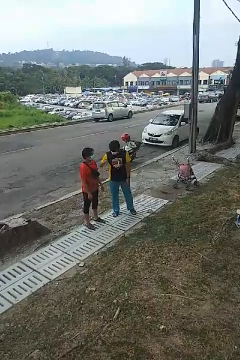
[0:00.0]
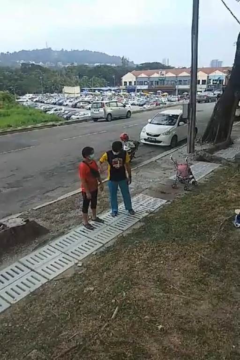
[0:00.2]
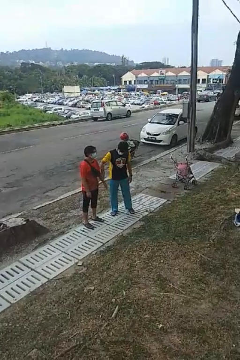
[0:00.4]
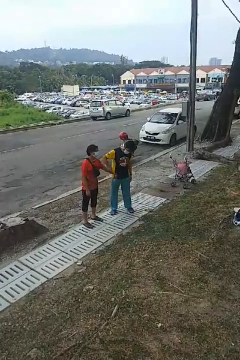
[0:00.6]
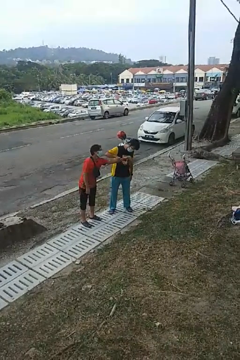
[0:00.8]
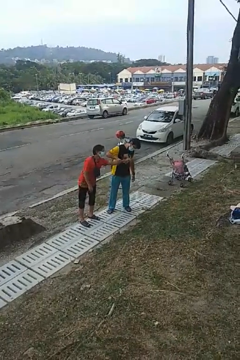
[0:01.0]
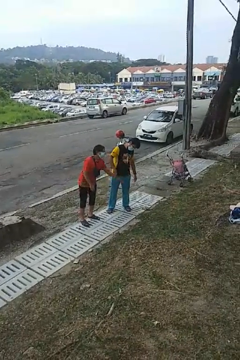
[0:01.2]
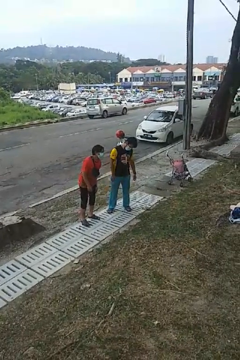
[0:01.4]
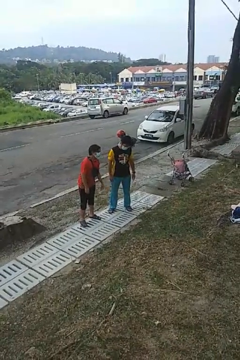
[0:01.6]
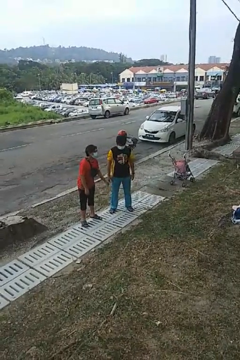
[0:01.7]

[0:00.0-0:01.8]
person grabs person by forearm

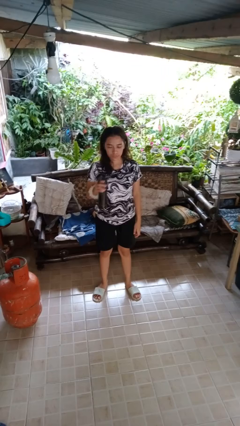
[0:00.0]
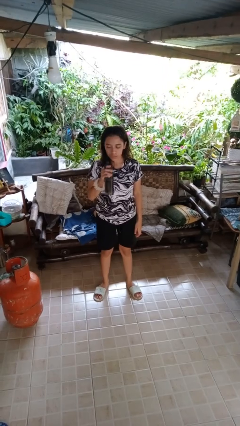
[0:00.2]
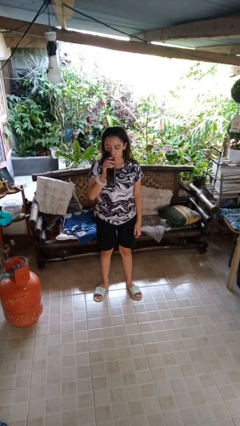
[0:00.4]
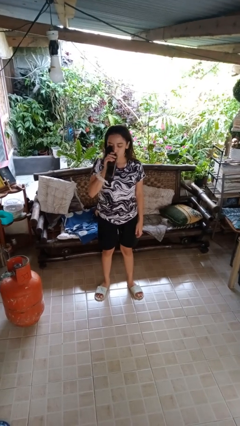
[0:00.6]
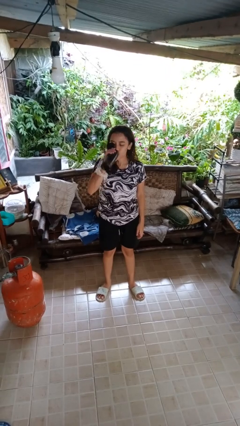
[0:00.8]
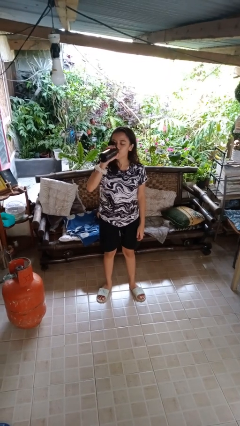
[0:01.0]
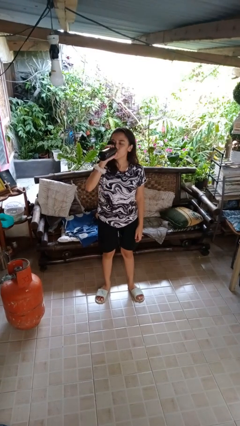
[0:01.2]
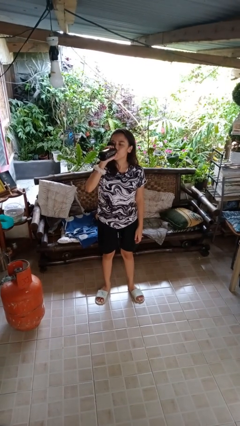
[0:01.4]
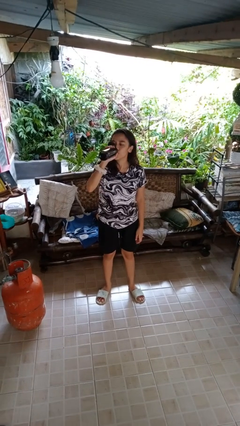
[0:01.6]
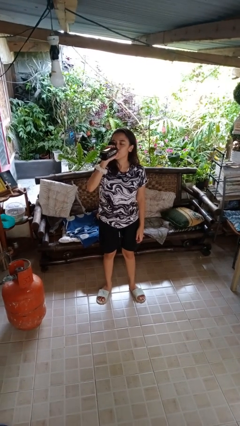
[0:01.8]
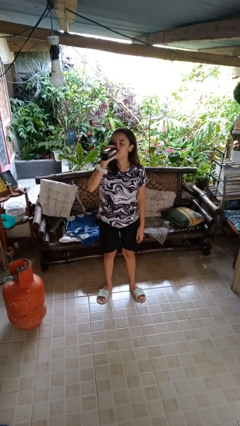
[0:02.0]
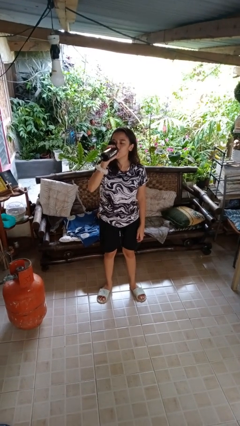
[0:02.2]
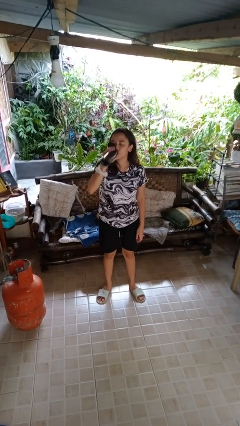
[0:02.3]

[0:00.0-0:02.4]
person drinks from bottle

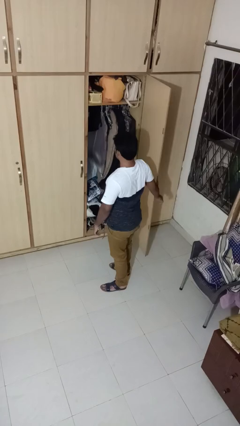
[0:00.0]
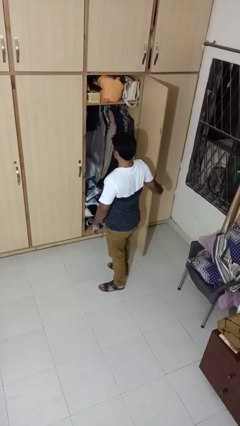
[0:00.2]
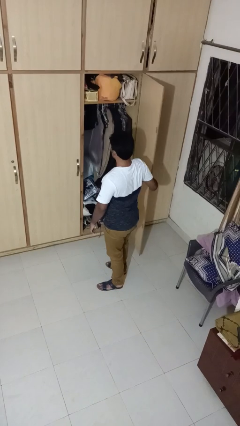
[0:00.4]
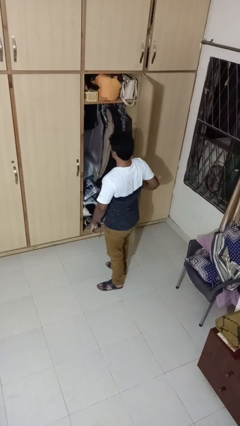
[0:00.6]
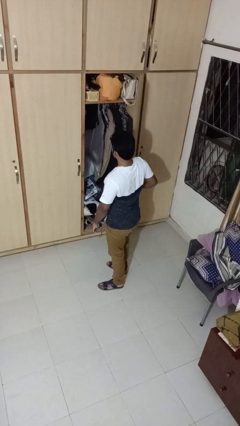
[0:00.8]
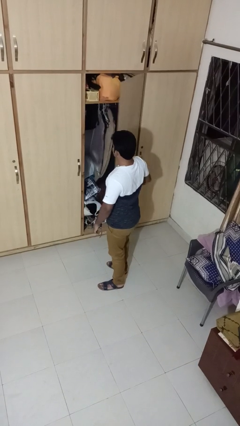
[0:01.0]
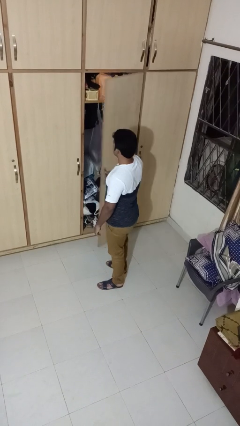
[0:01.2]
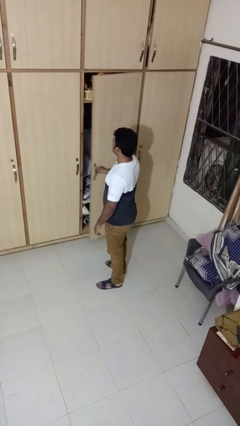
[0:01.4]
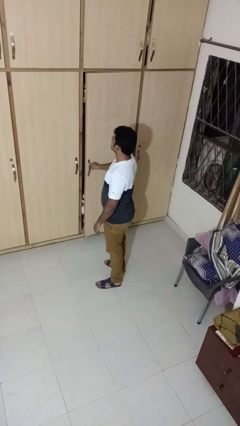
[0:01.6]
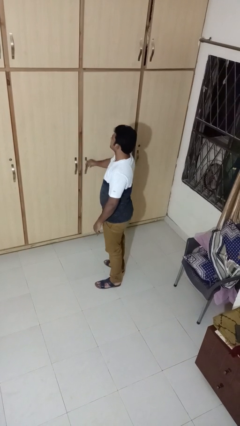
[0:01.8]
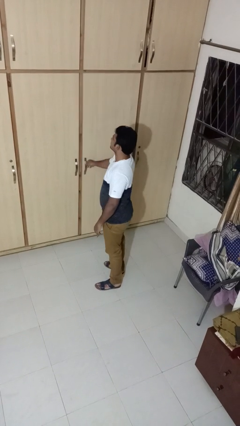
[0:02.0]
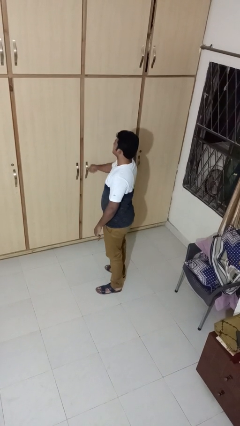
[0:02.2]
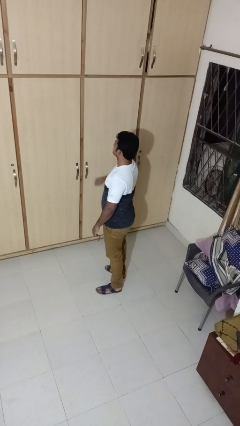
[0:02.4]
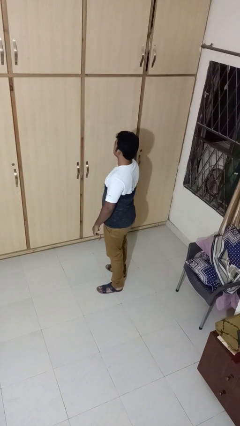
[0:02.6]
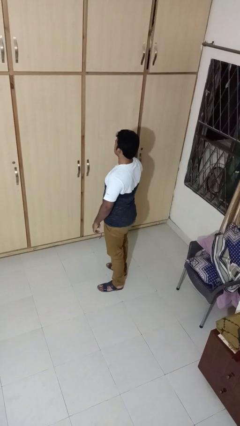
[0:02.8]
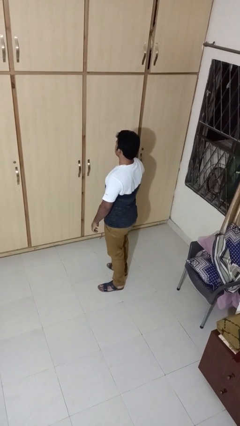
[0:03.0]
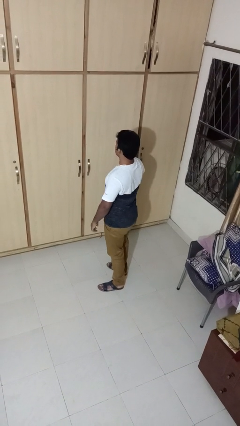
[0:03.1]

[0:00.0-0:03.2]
person closes closet door

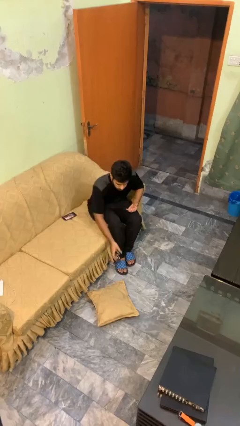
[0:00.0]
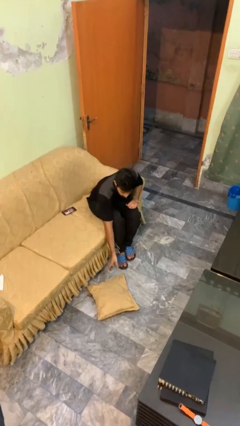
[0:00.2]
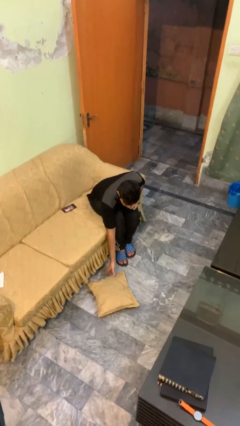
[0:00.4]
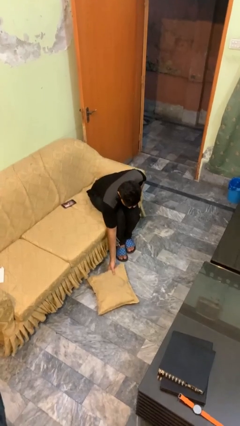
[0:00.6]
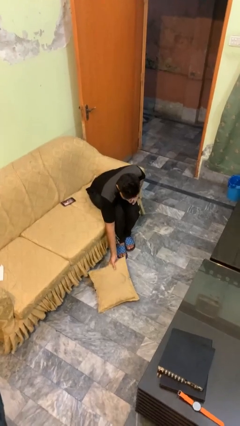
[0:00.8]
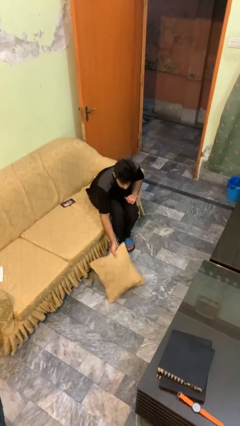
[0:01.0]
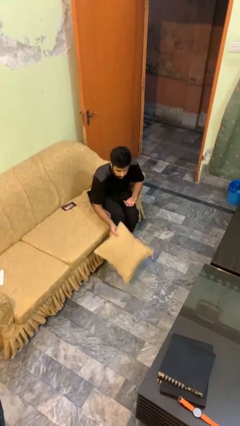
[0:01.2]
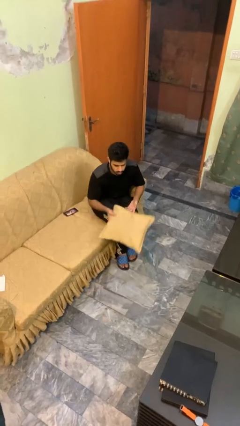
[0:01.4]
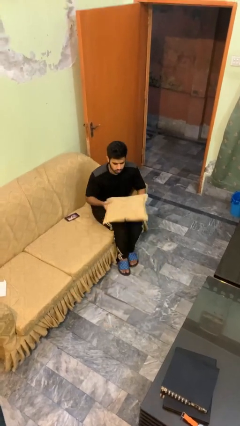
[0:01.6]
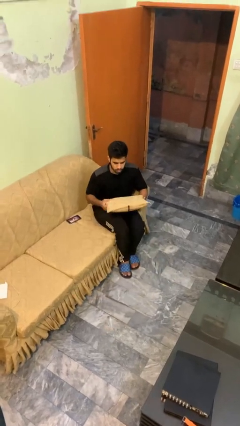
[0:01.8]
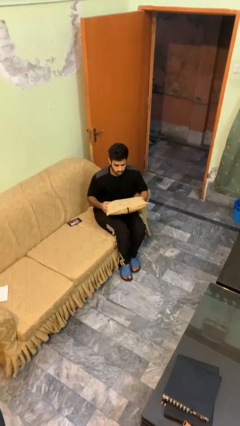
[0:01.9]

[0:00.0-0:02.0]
person picks up object from floor

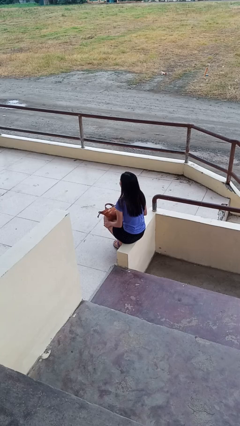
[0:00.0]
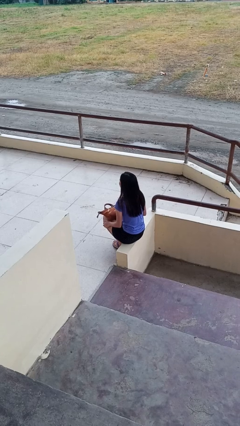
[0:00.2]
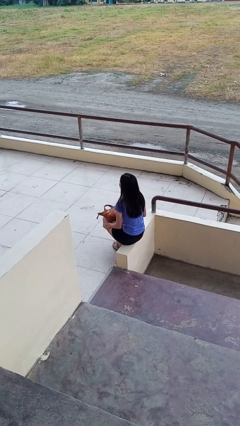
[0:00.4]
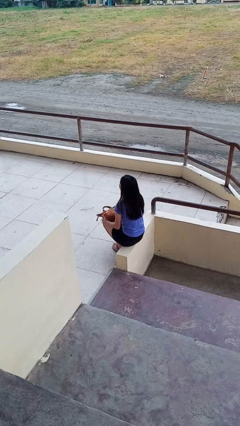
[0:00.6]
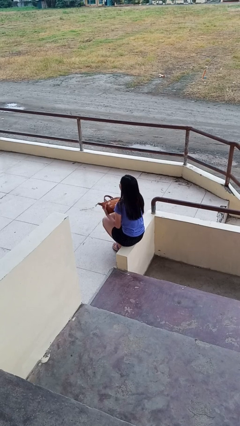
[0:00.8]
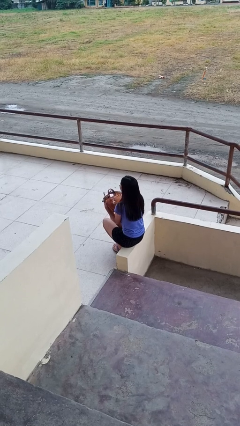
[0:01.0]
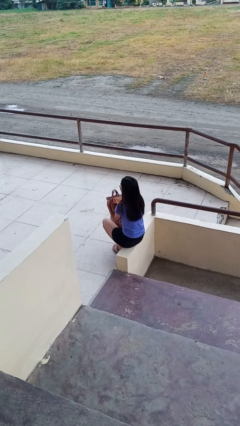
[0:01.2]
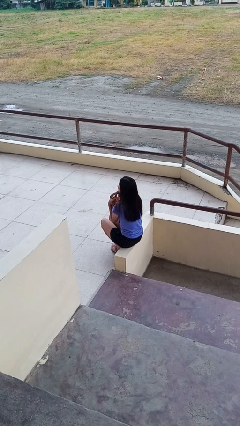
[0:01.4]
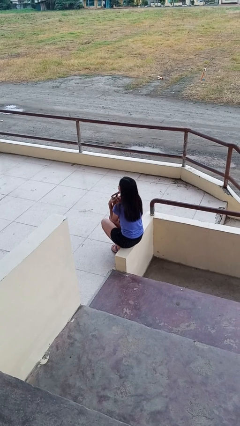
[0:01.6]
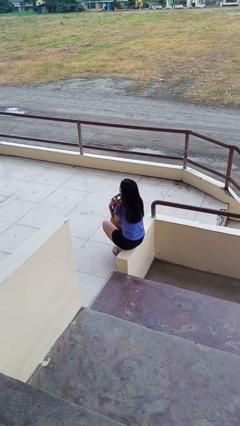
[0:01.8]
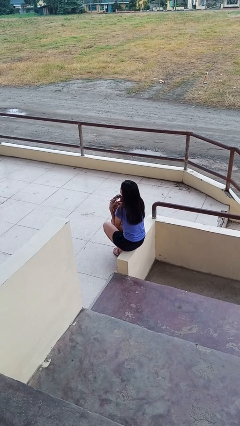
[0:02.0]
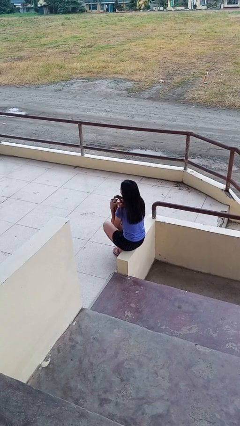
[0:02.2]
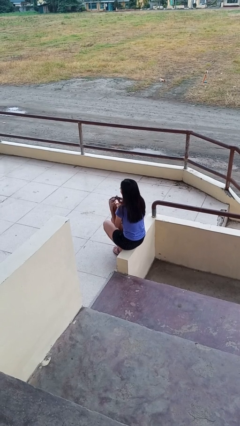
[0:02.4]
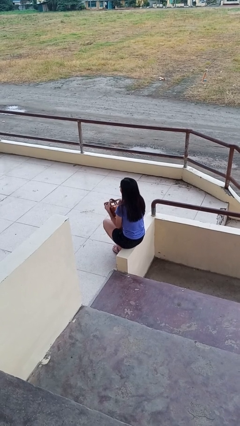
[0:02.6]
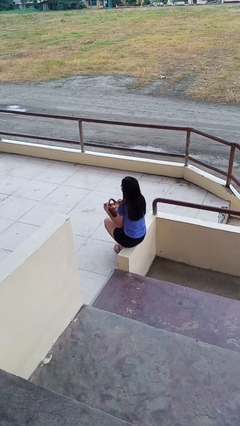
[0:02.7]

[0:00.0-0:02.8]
person squeezes object

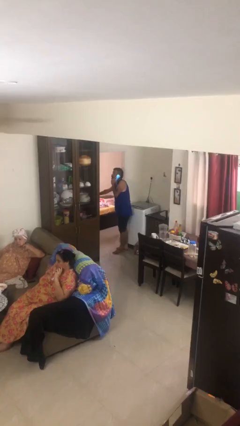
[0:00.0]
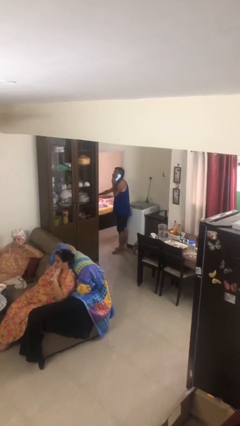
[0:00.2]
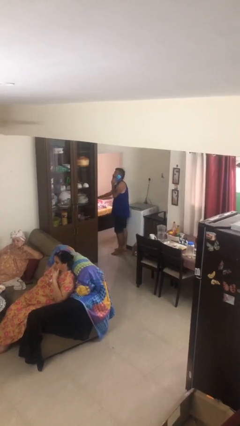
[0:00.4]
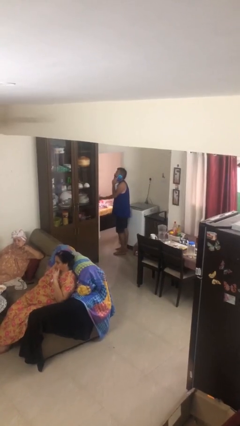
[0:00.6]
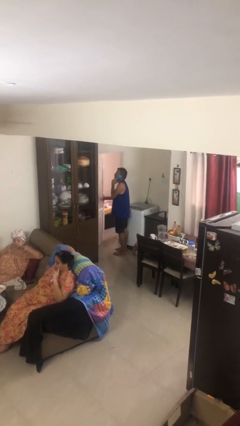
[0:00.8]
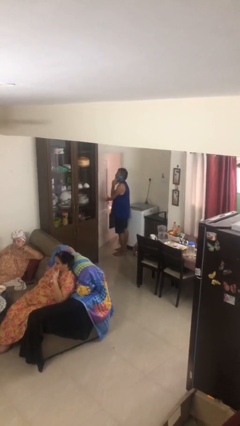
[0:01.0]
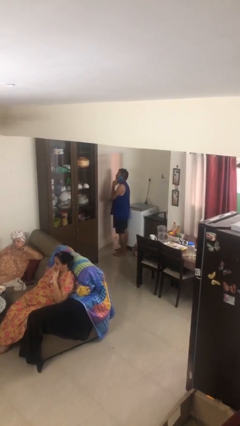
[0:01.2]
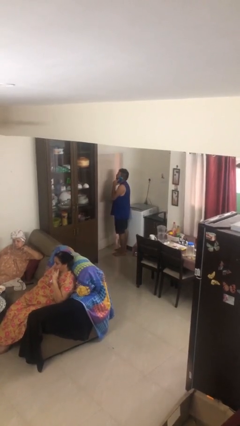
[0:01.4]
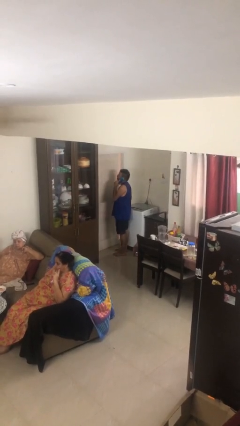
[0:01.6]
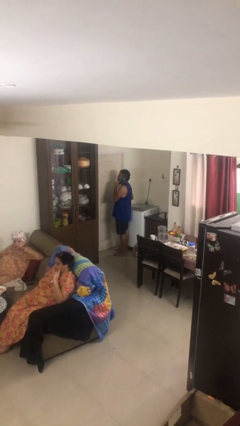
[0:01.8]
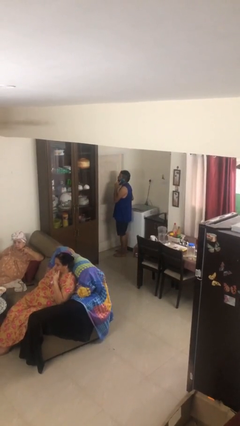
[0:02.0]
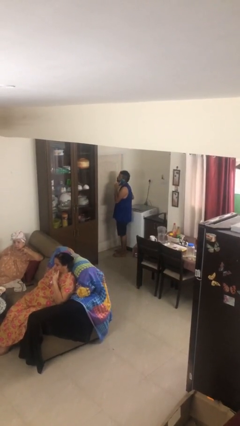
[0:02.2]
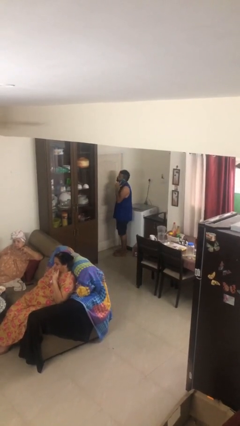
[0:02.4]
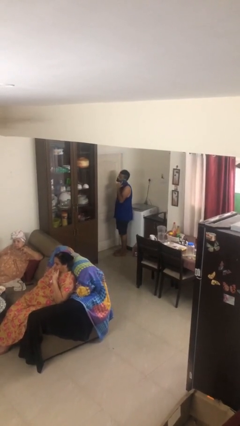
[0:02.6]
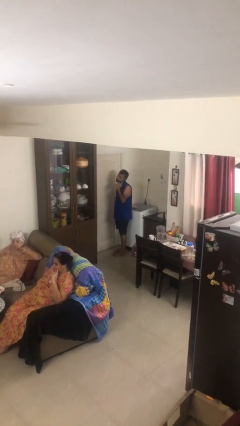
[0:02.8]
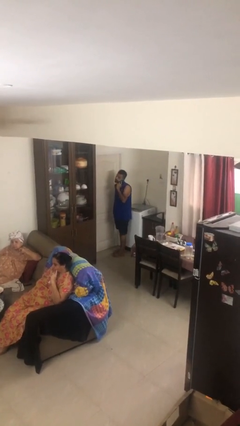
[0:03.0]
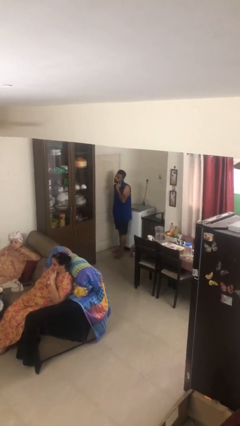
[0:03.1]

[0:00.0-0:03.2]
person closes facility door

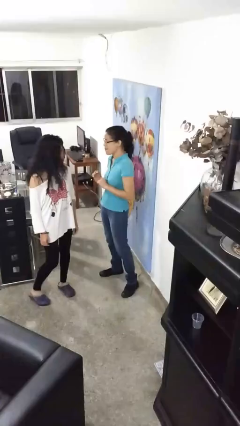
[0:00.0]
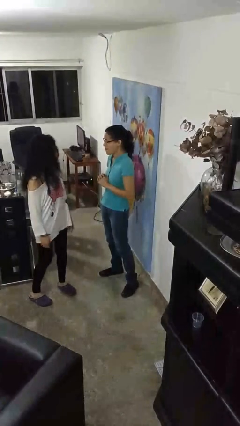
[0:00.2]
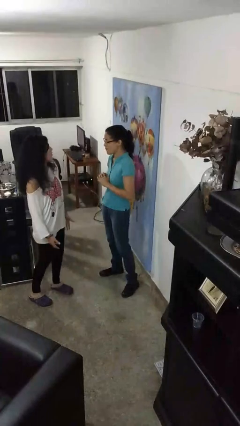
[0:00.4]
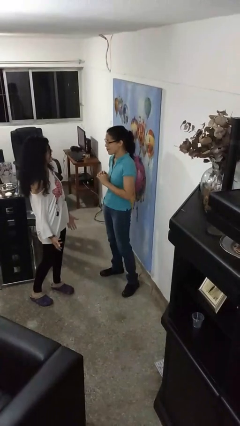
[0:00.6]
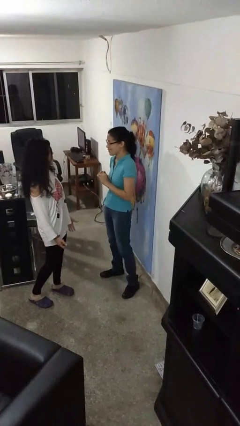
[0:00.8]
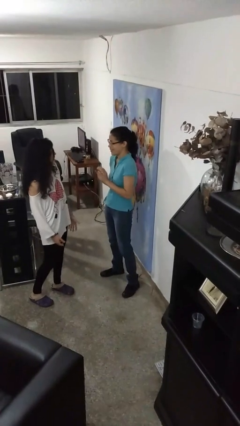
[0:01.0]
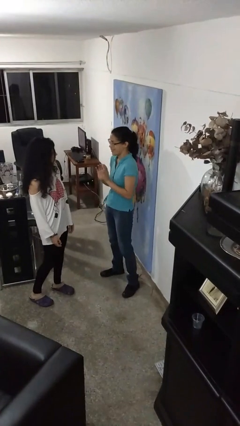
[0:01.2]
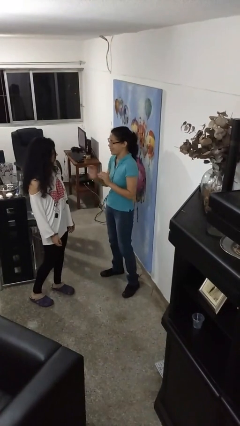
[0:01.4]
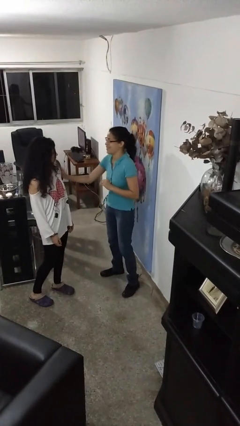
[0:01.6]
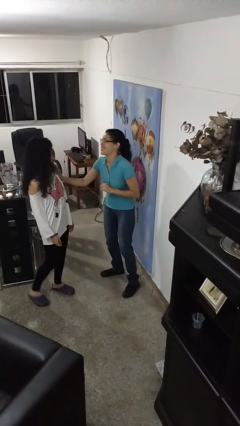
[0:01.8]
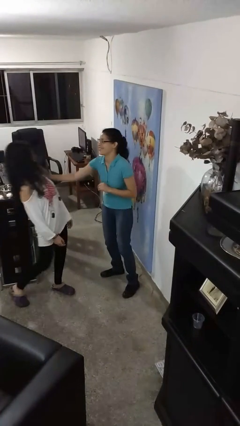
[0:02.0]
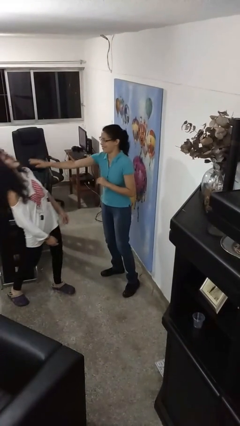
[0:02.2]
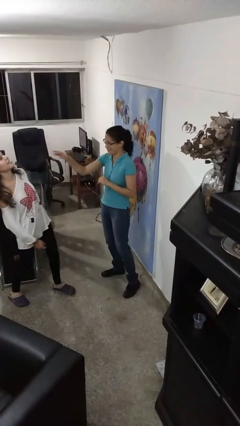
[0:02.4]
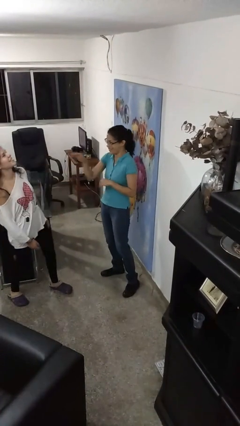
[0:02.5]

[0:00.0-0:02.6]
person shoves person
